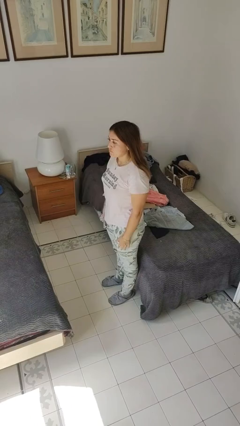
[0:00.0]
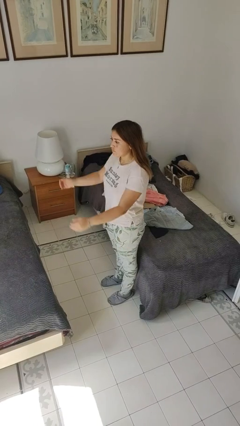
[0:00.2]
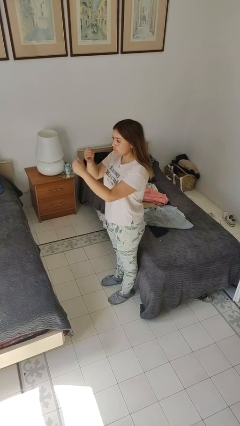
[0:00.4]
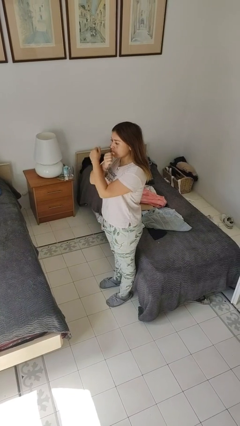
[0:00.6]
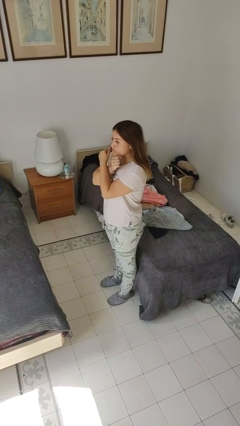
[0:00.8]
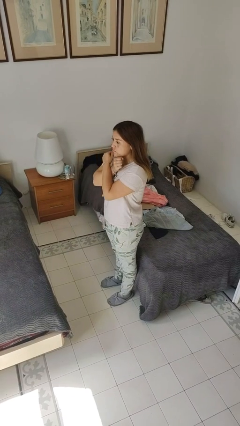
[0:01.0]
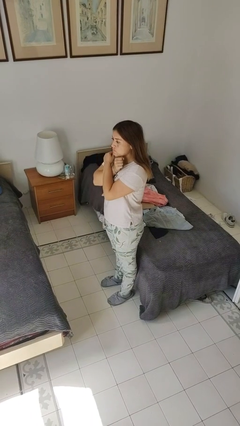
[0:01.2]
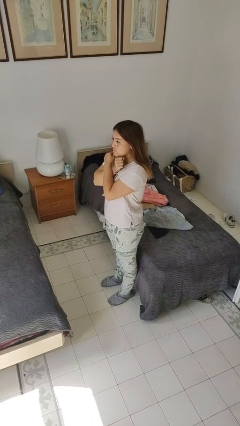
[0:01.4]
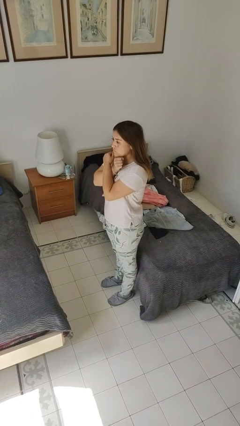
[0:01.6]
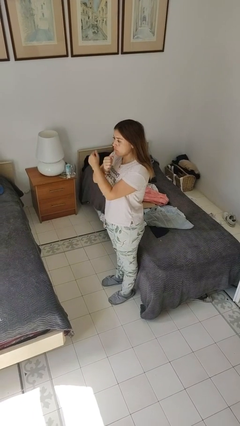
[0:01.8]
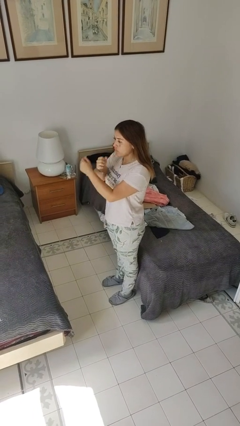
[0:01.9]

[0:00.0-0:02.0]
person gestures arms x

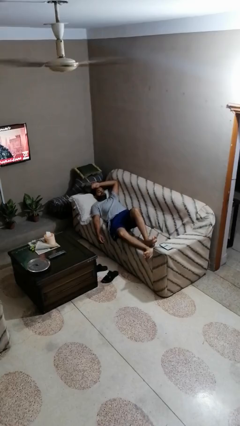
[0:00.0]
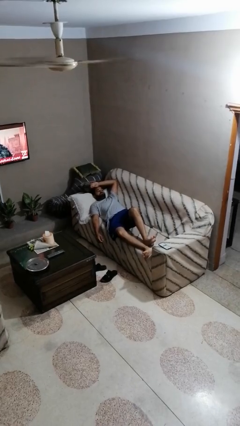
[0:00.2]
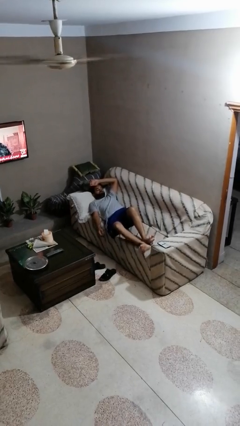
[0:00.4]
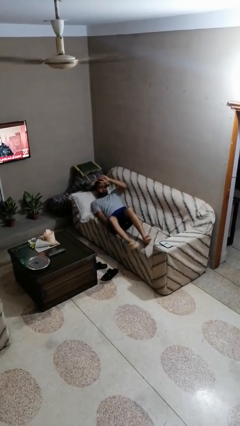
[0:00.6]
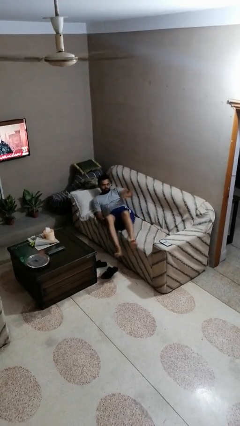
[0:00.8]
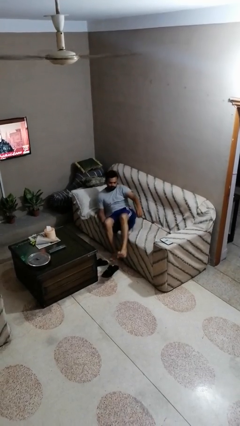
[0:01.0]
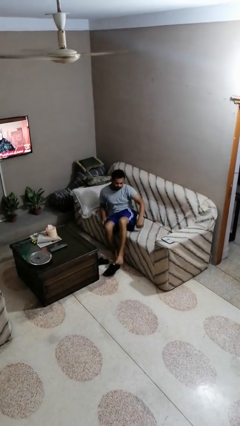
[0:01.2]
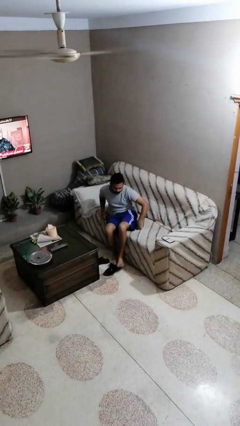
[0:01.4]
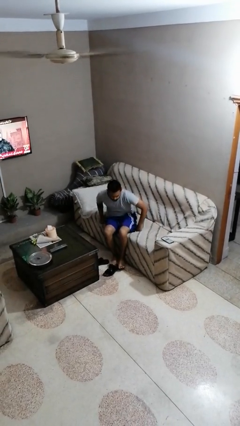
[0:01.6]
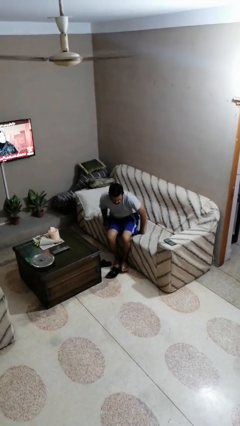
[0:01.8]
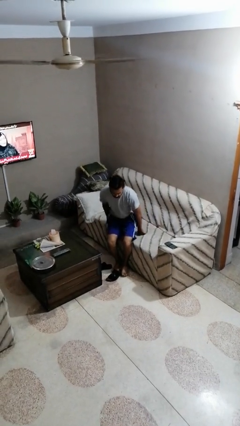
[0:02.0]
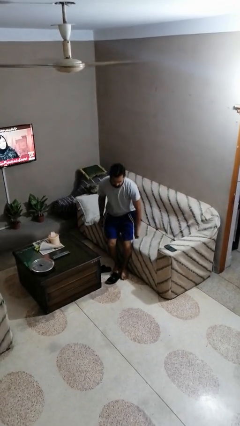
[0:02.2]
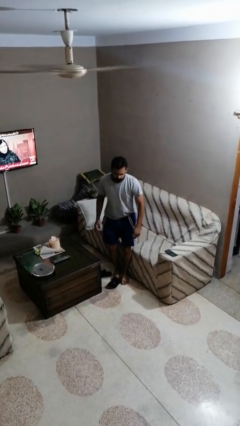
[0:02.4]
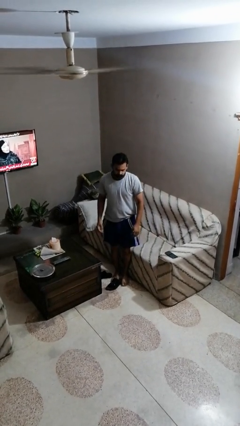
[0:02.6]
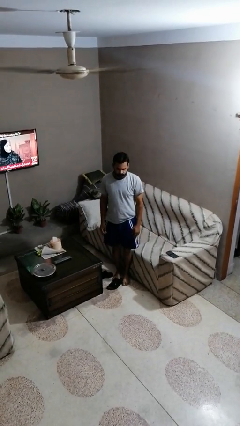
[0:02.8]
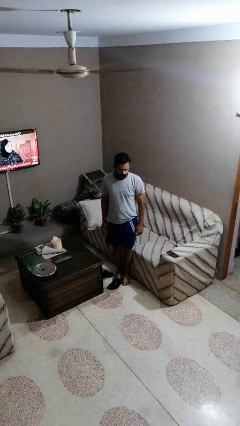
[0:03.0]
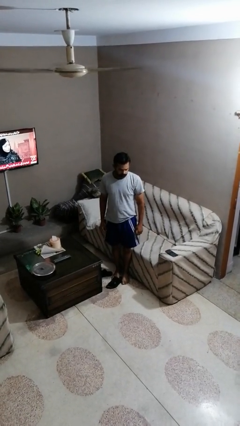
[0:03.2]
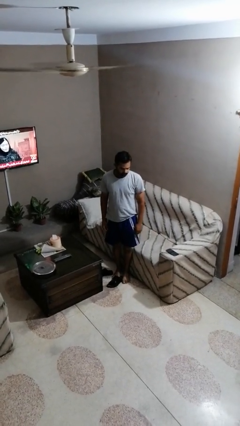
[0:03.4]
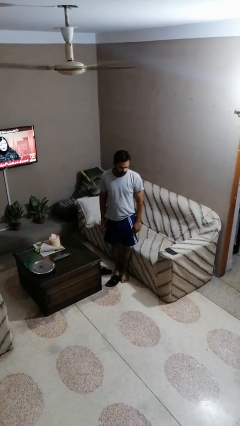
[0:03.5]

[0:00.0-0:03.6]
person stands up

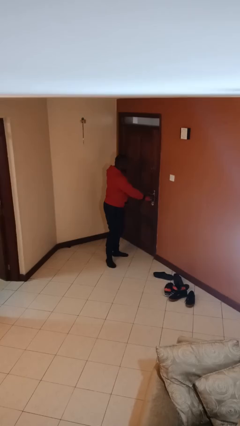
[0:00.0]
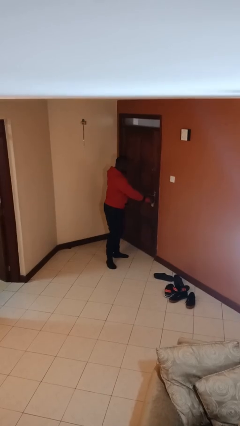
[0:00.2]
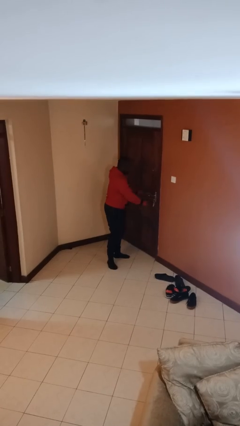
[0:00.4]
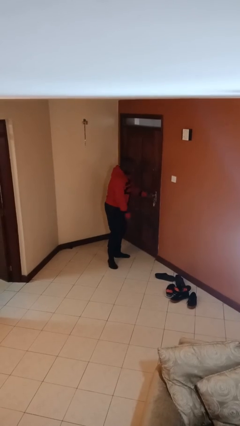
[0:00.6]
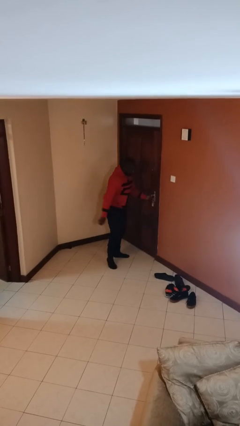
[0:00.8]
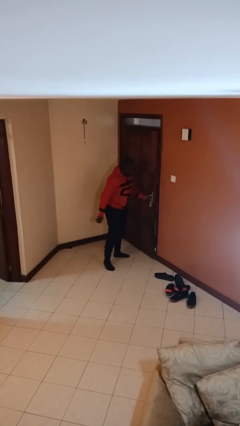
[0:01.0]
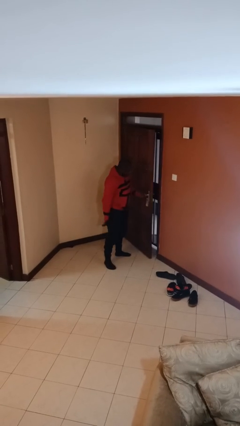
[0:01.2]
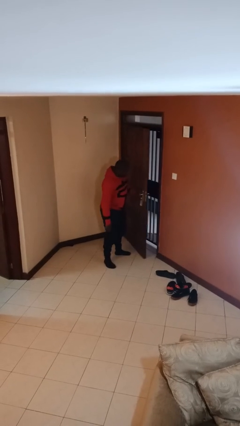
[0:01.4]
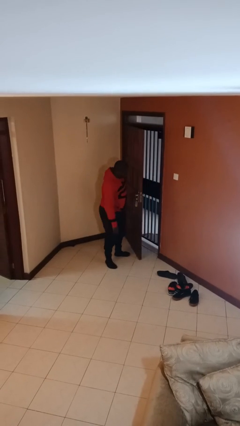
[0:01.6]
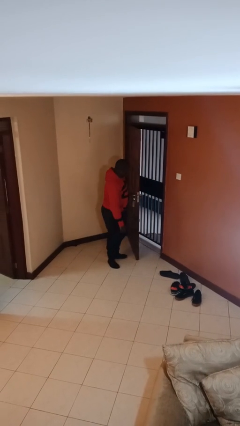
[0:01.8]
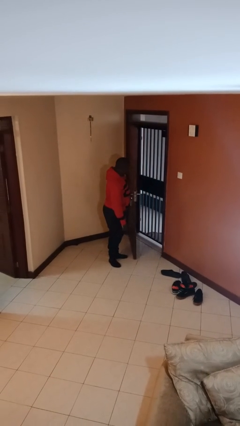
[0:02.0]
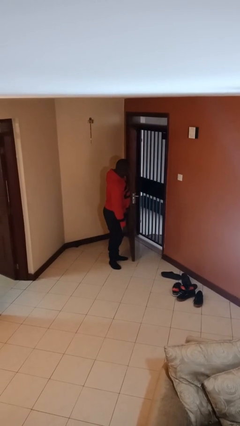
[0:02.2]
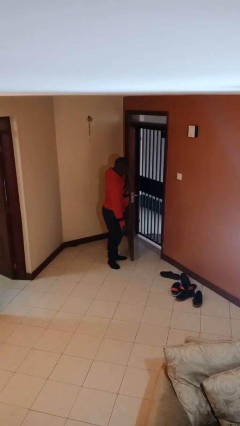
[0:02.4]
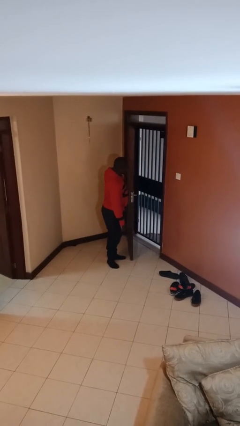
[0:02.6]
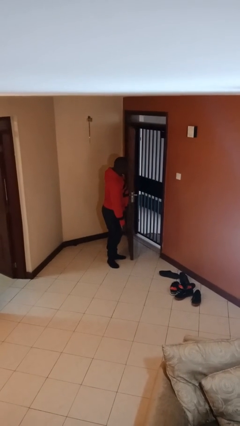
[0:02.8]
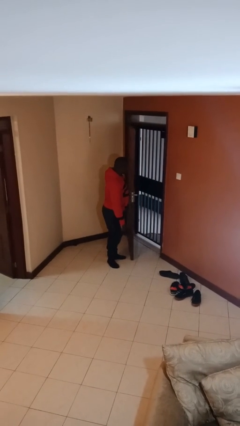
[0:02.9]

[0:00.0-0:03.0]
person opens facility door

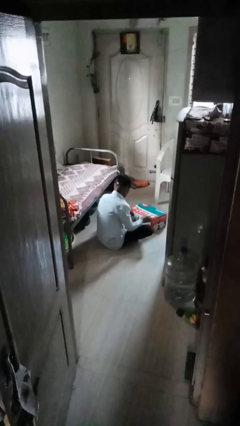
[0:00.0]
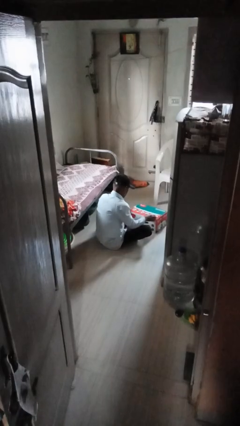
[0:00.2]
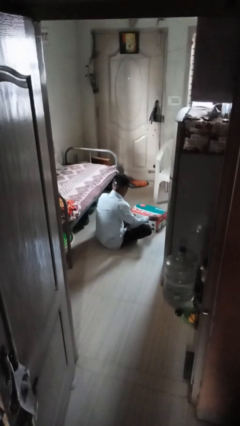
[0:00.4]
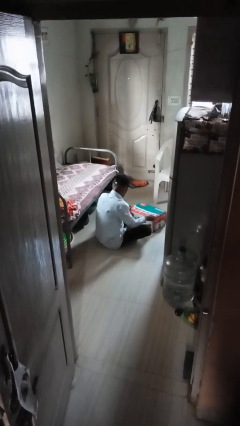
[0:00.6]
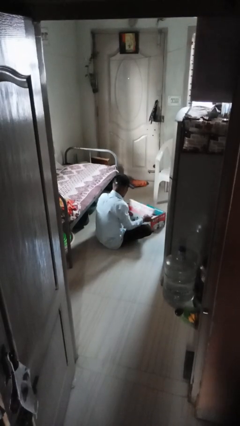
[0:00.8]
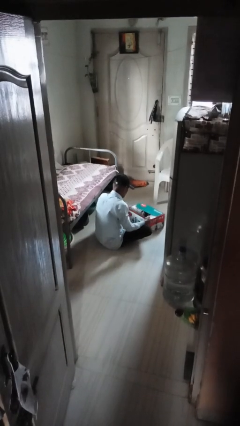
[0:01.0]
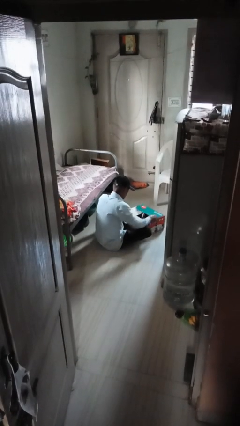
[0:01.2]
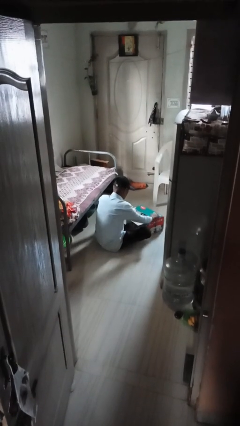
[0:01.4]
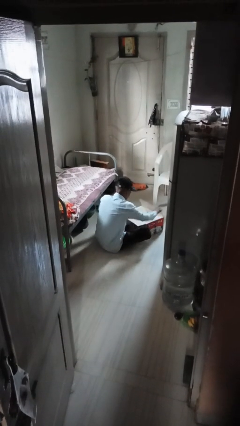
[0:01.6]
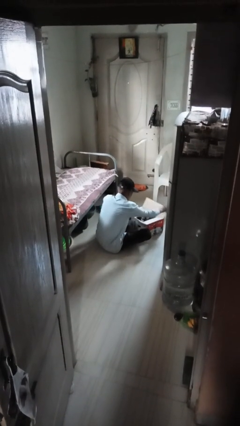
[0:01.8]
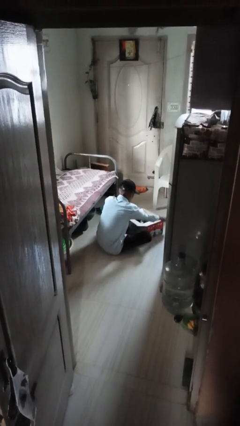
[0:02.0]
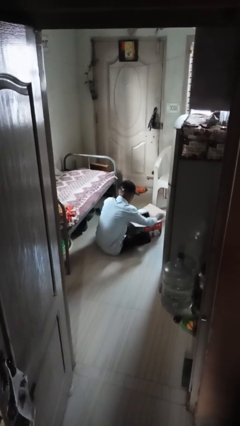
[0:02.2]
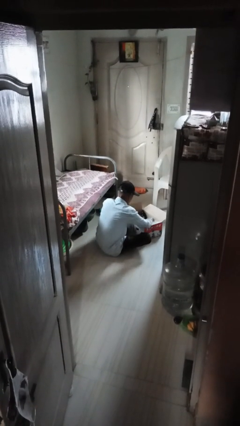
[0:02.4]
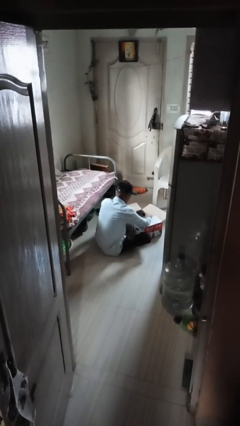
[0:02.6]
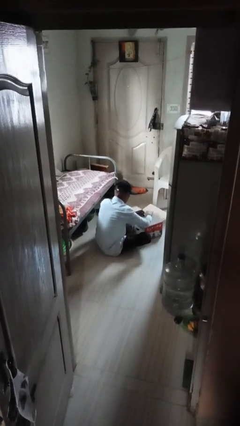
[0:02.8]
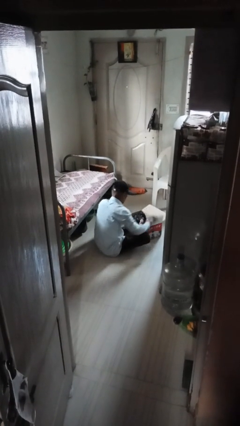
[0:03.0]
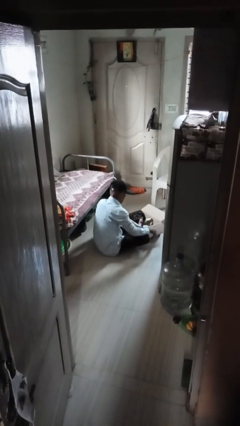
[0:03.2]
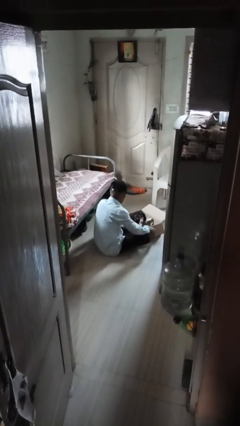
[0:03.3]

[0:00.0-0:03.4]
person opens box

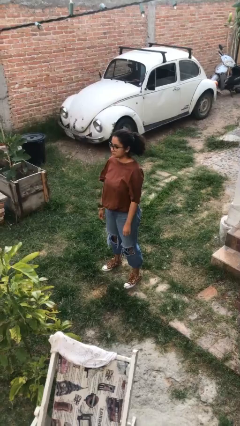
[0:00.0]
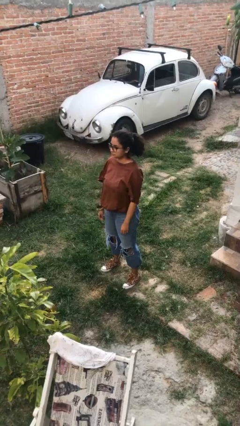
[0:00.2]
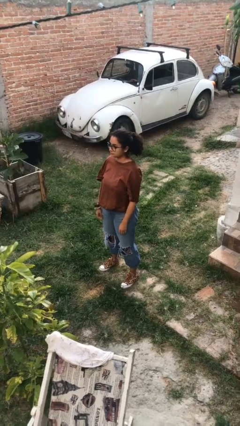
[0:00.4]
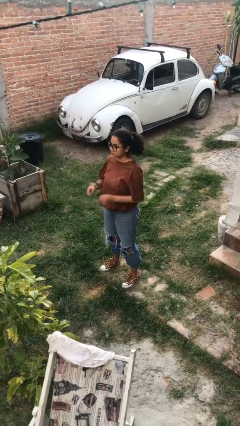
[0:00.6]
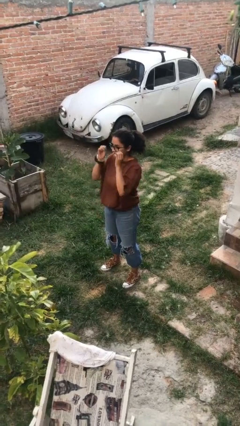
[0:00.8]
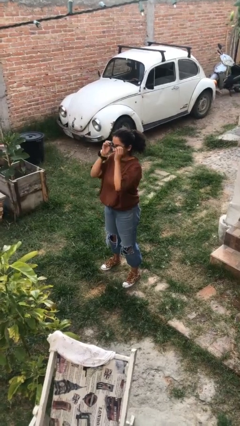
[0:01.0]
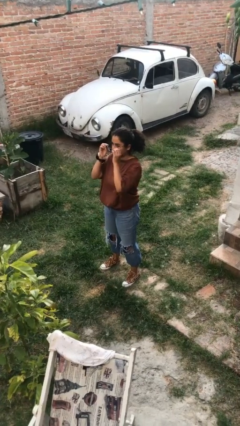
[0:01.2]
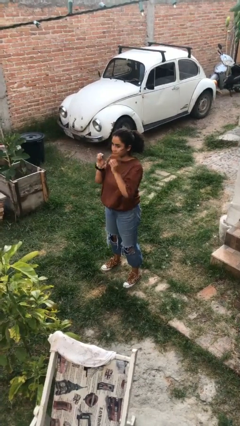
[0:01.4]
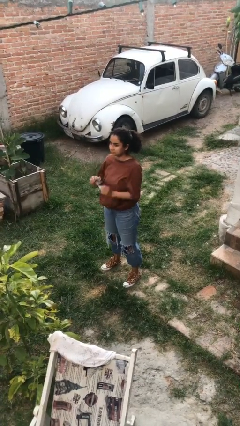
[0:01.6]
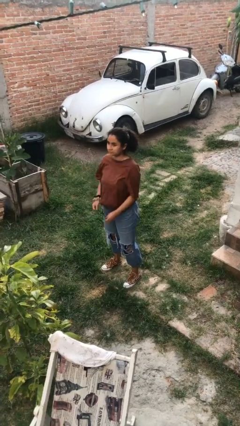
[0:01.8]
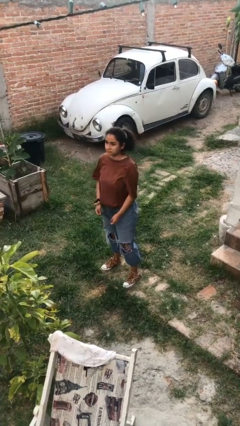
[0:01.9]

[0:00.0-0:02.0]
person takes off glasses

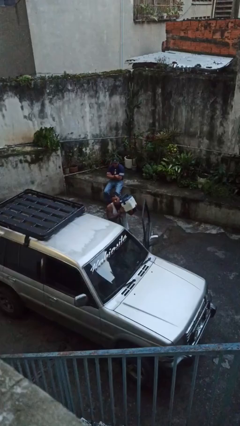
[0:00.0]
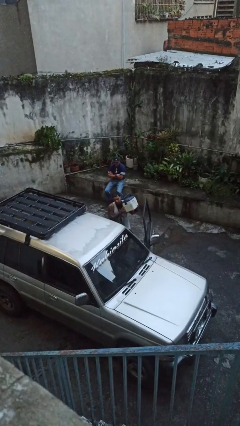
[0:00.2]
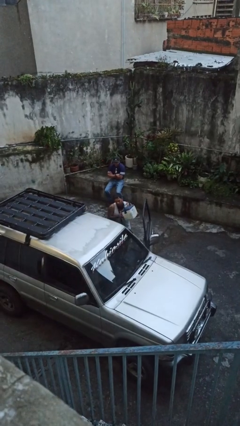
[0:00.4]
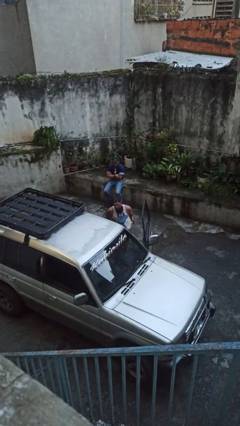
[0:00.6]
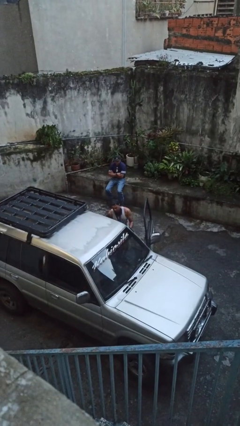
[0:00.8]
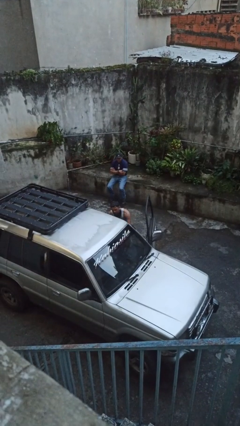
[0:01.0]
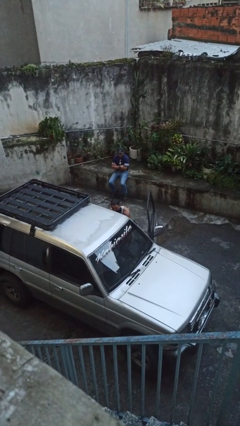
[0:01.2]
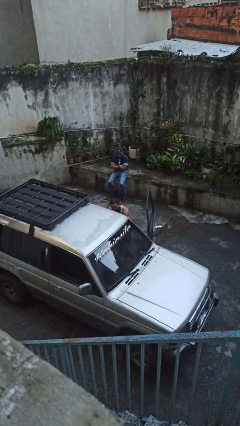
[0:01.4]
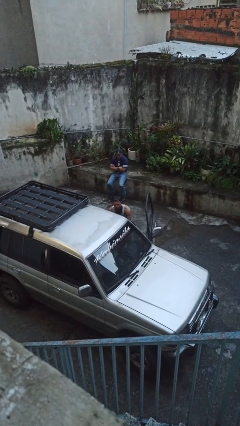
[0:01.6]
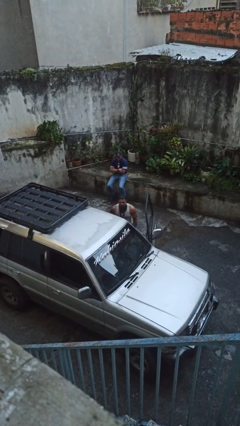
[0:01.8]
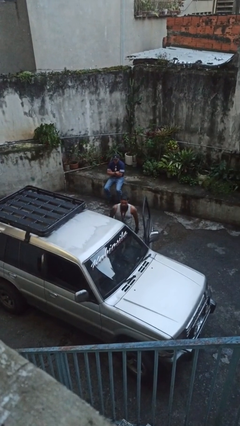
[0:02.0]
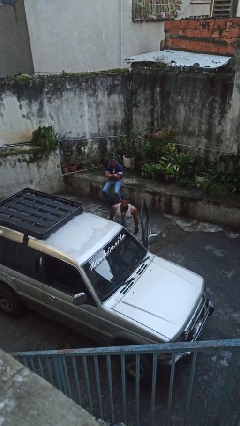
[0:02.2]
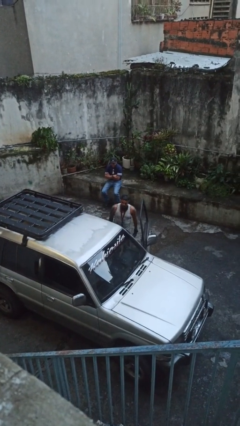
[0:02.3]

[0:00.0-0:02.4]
person loads car

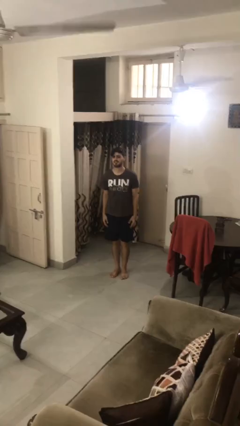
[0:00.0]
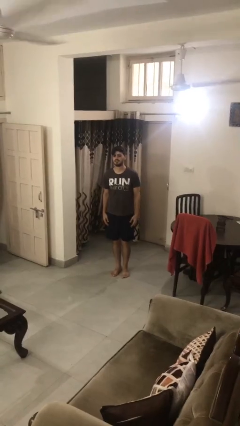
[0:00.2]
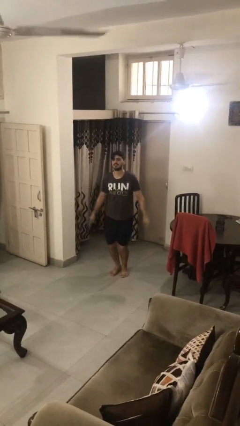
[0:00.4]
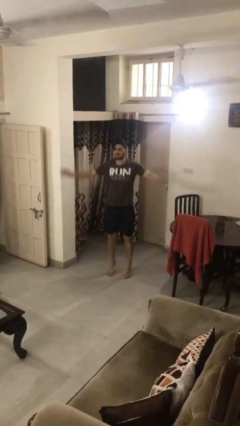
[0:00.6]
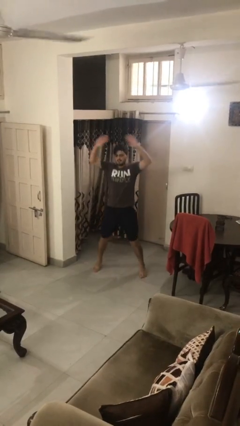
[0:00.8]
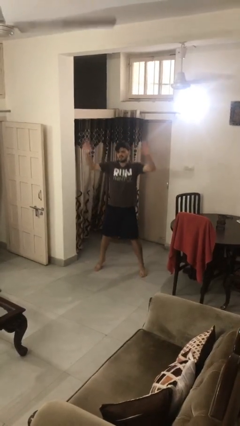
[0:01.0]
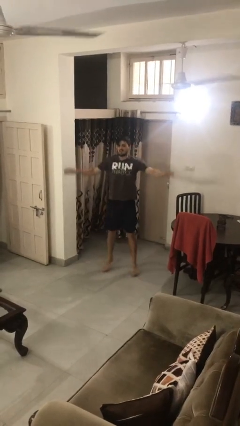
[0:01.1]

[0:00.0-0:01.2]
person exercises with jumping jacks
